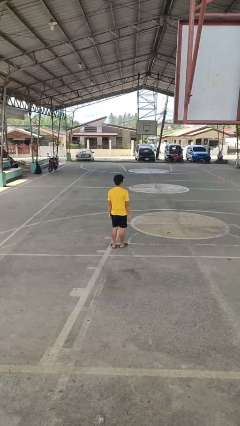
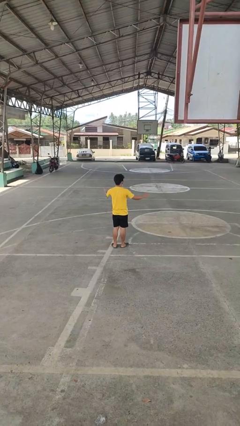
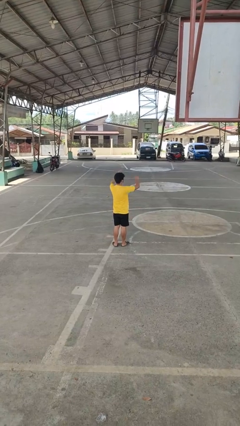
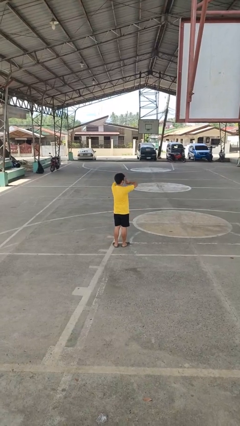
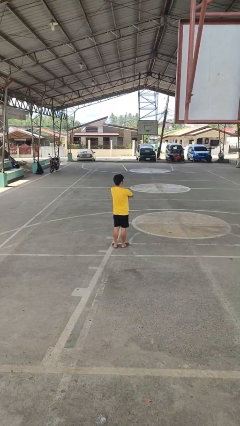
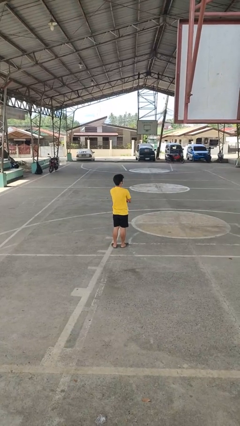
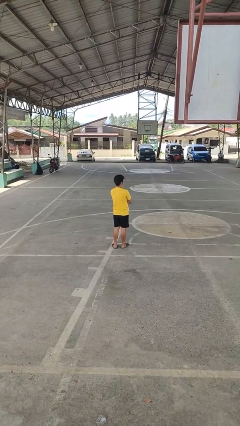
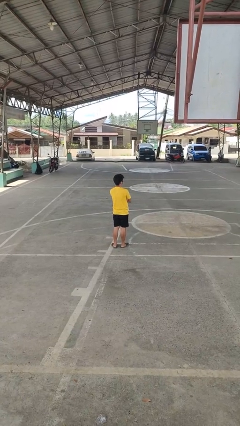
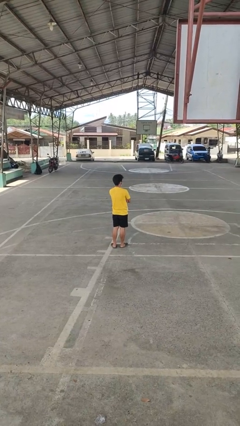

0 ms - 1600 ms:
person crosses arms

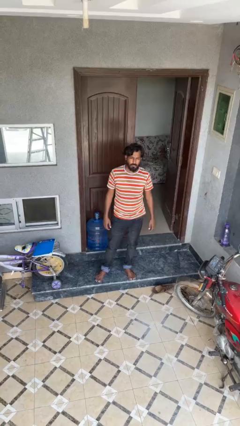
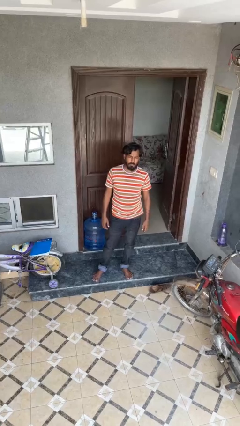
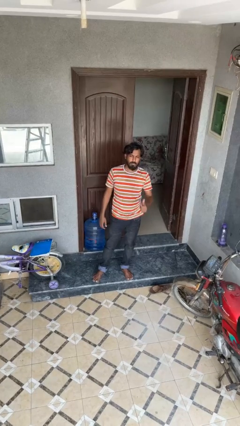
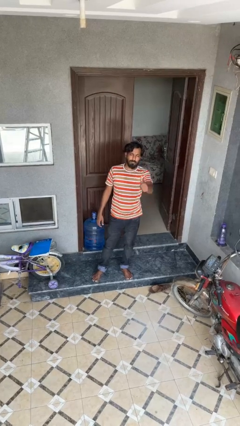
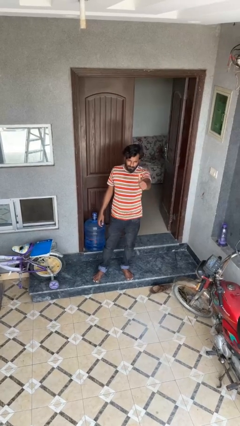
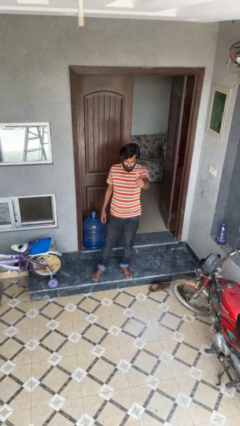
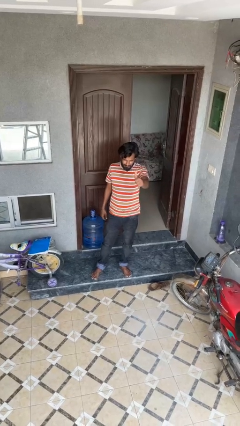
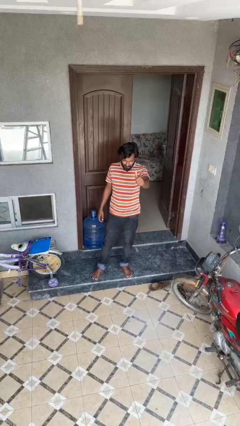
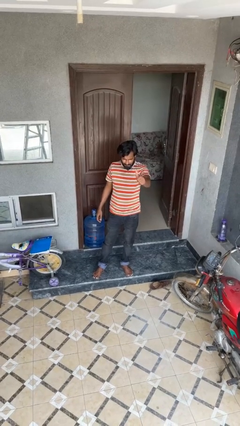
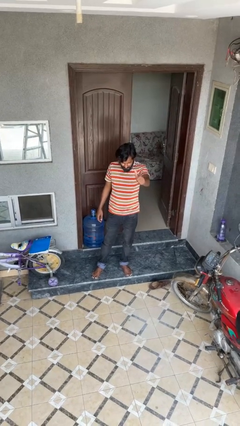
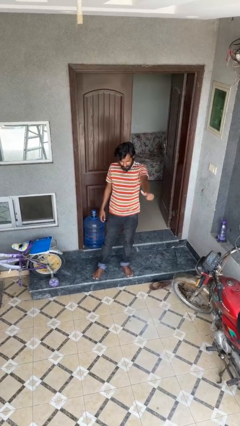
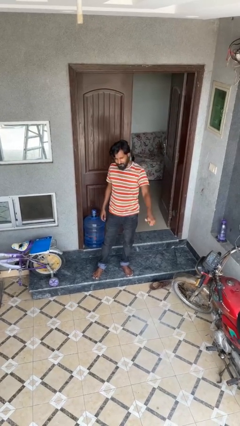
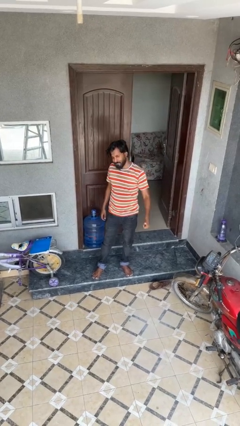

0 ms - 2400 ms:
person gestures thumbs up

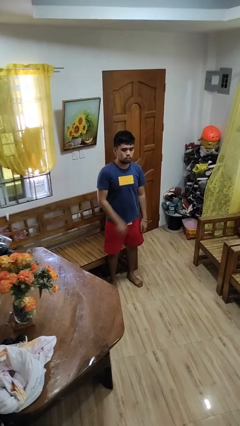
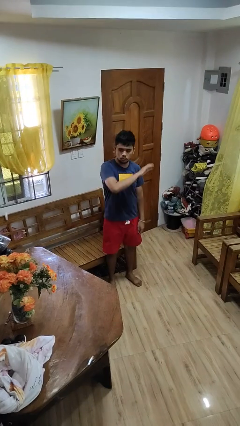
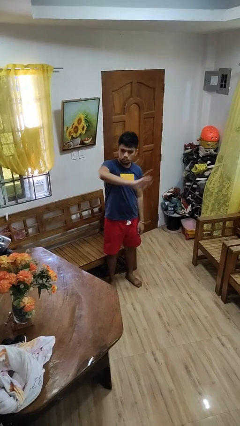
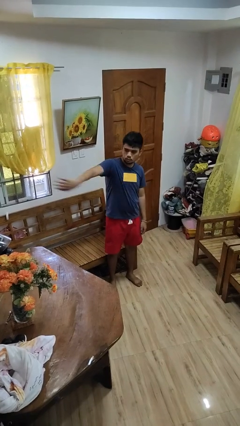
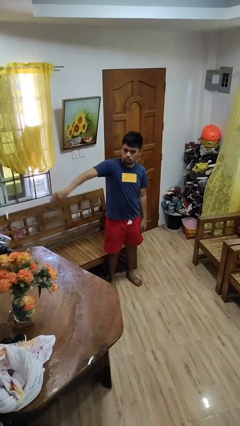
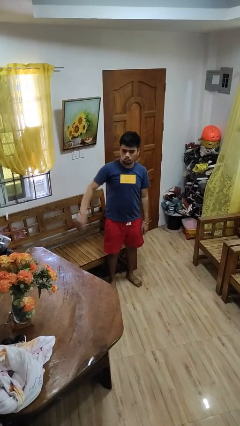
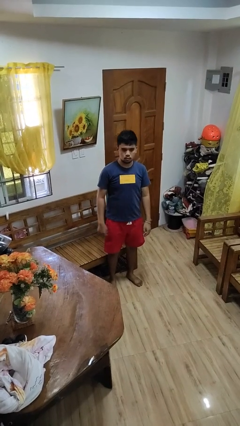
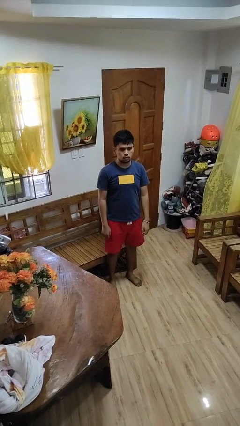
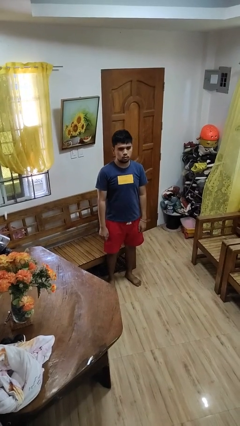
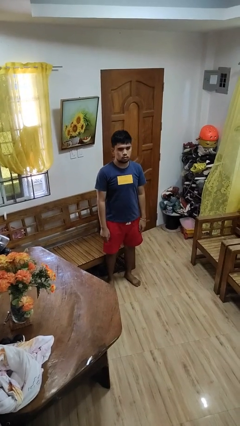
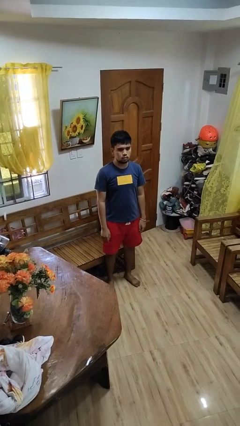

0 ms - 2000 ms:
person gestures swipe right

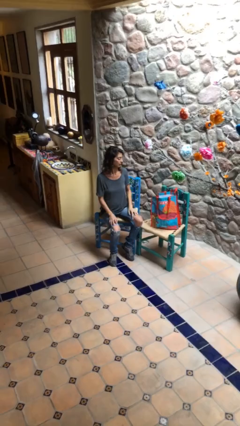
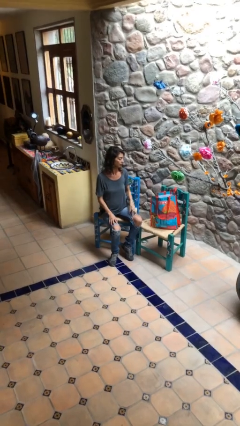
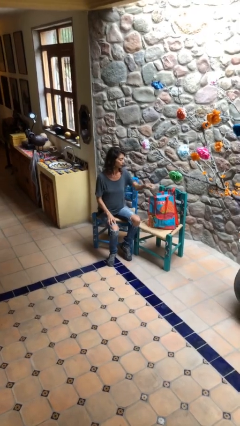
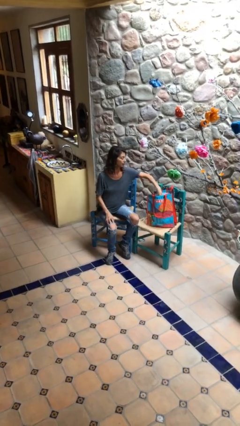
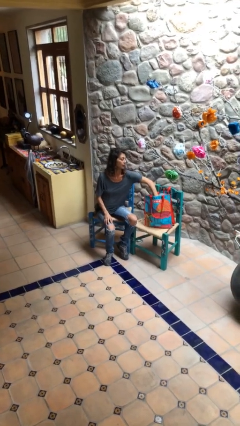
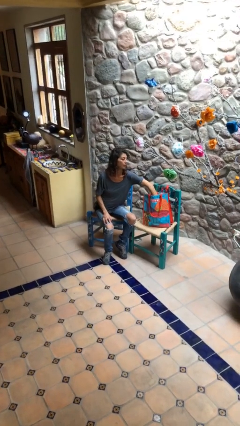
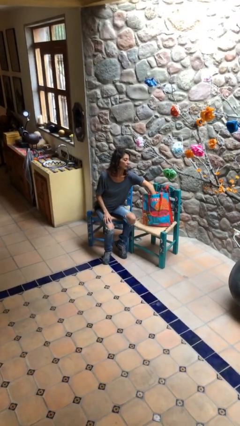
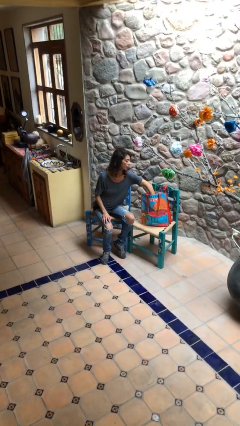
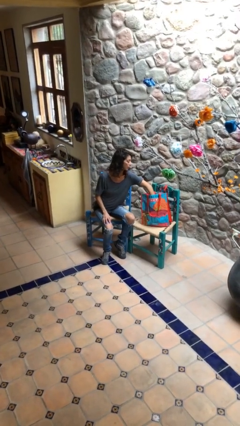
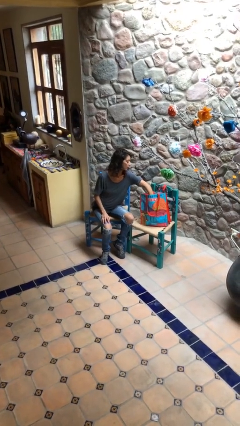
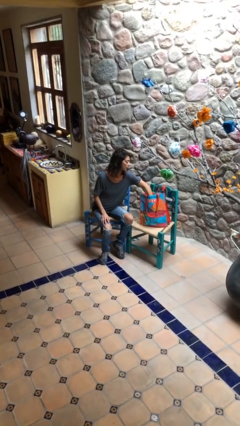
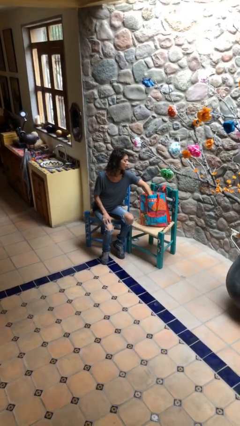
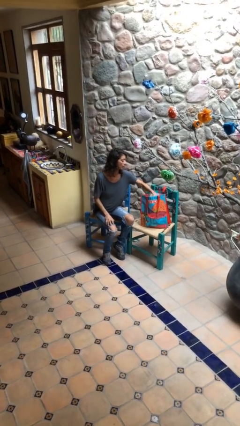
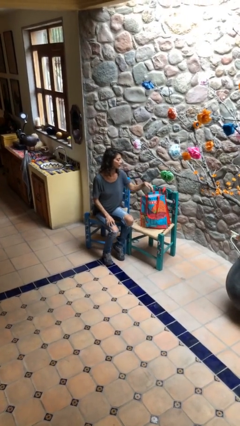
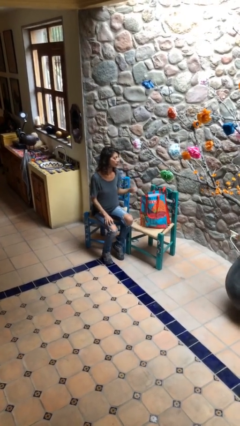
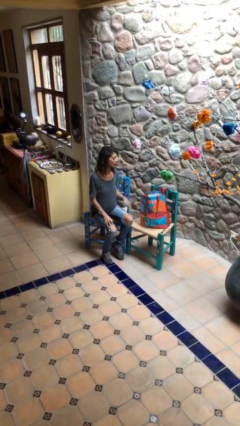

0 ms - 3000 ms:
person searches in bag

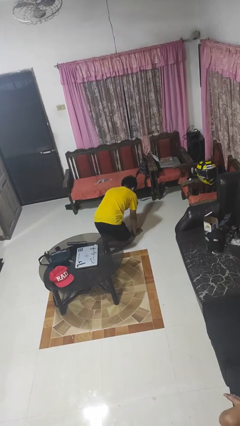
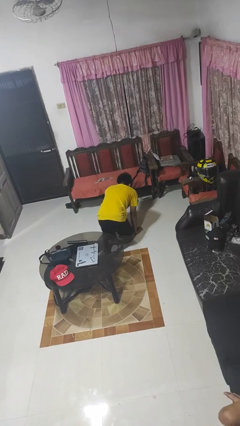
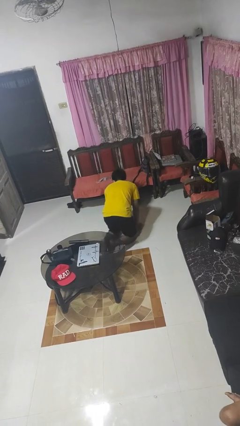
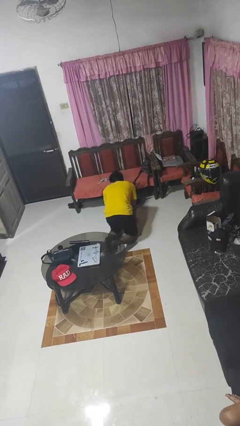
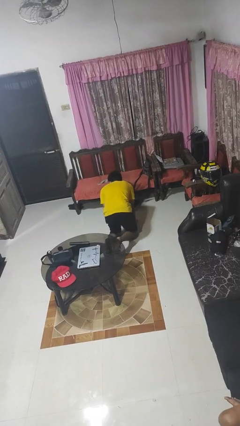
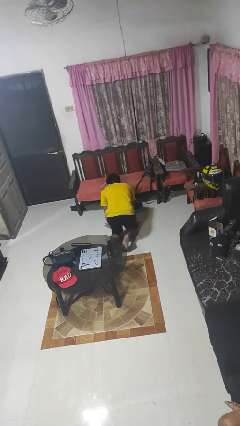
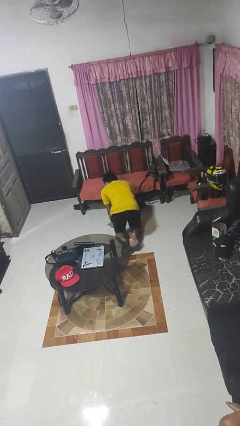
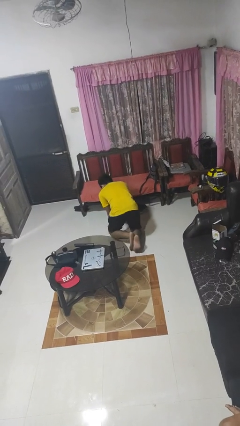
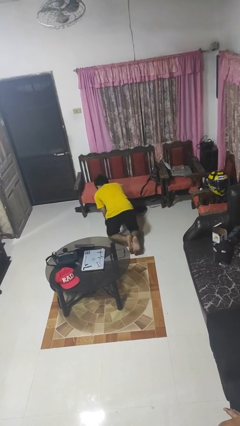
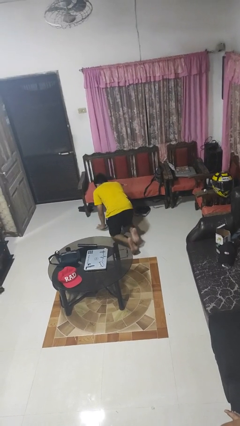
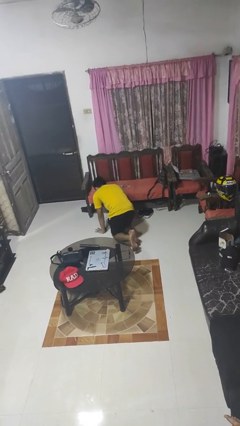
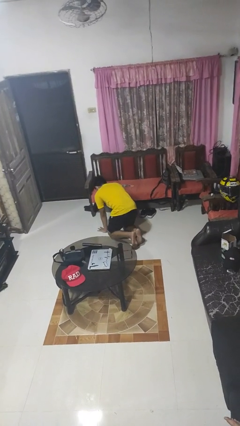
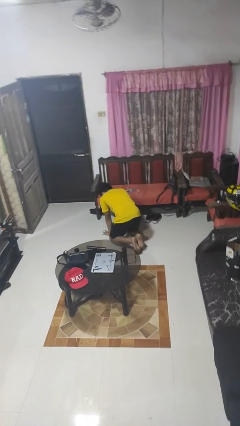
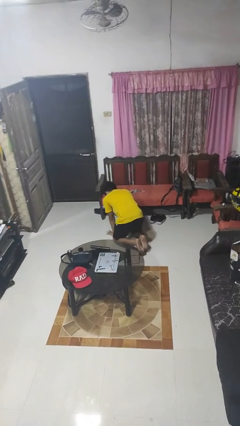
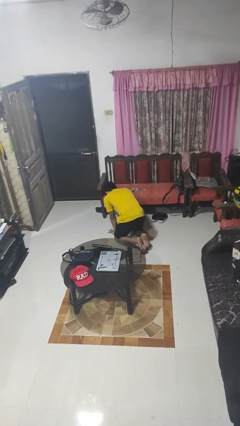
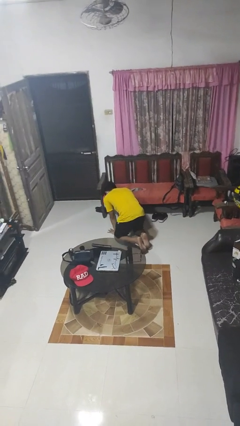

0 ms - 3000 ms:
person crawls

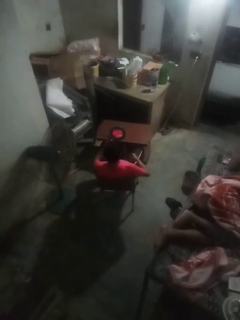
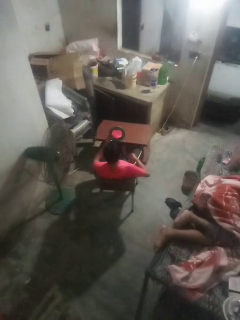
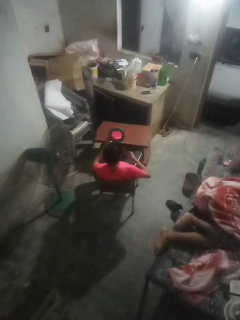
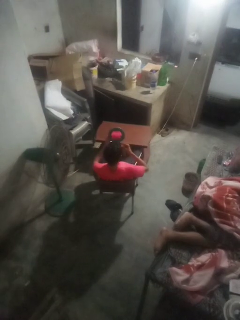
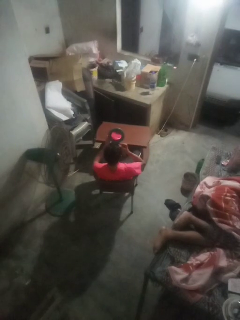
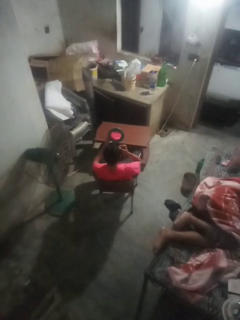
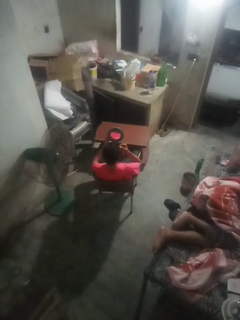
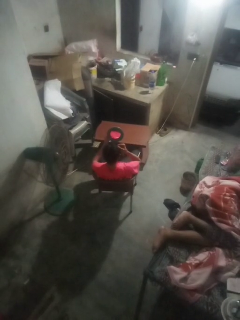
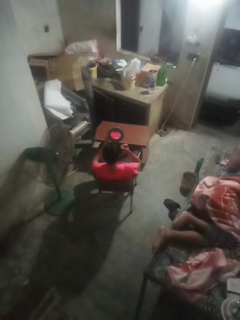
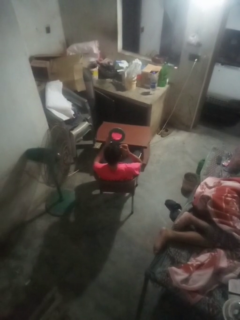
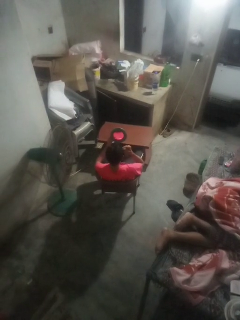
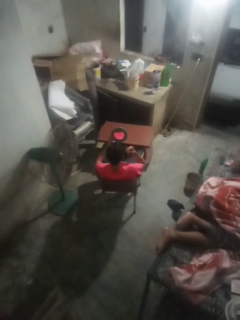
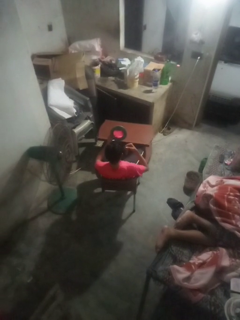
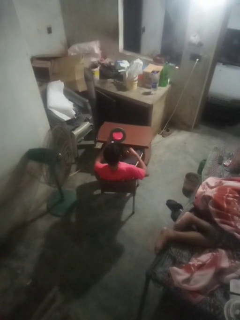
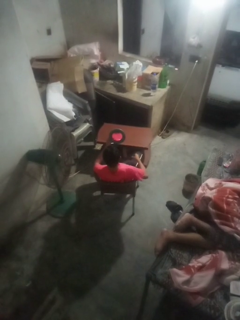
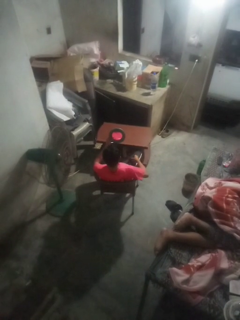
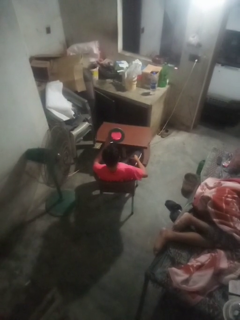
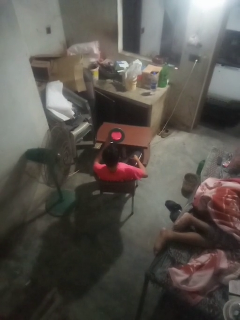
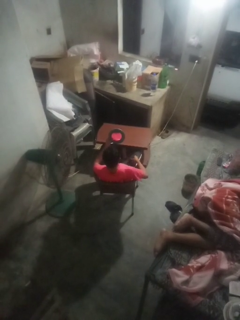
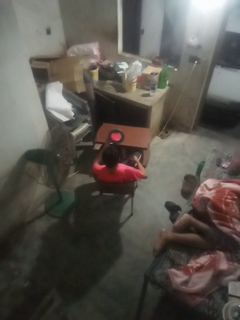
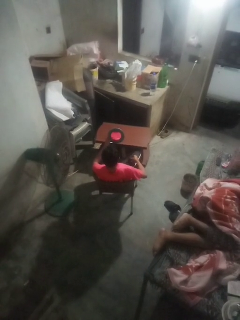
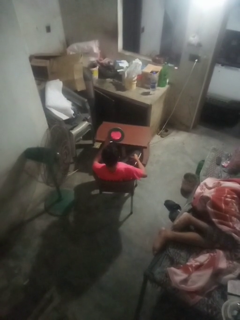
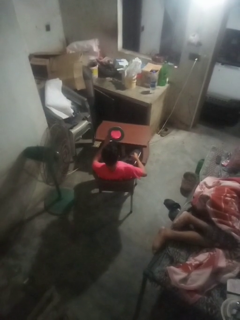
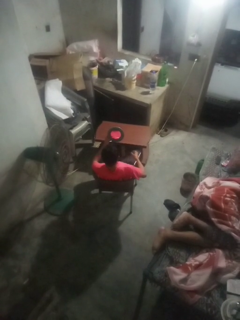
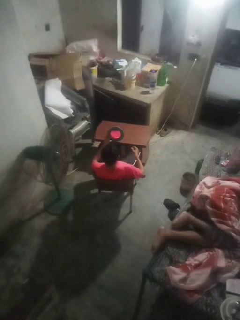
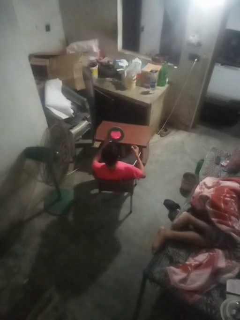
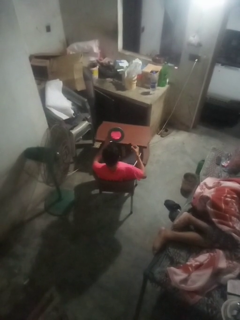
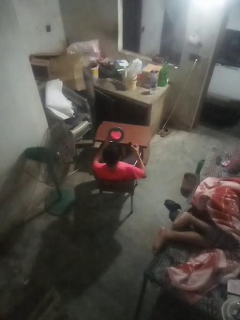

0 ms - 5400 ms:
person applies eye makeup

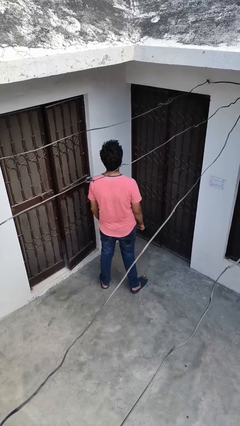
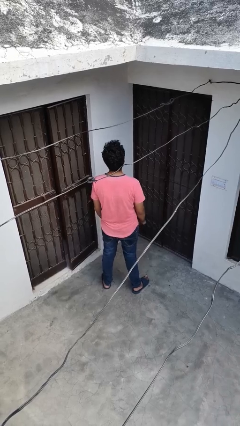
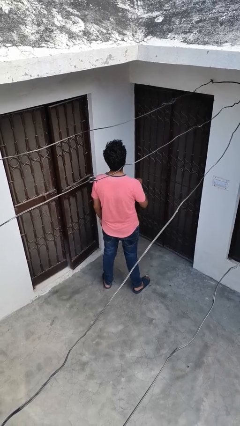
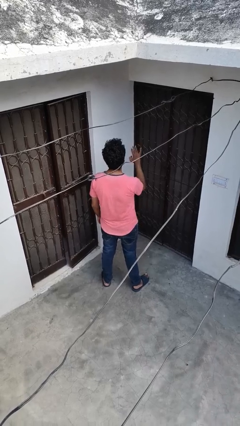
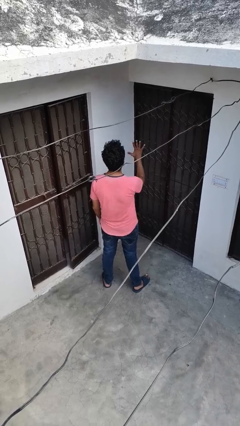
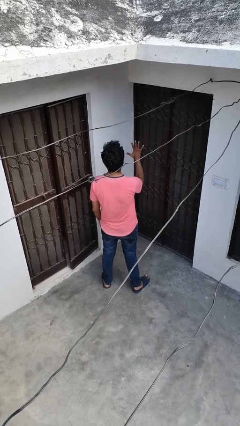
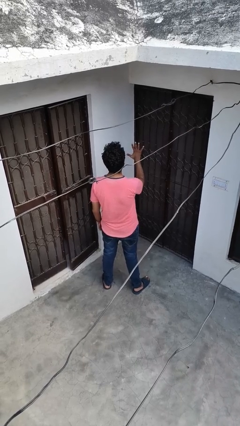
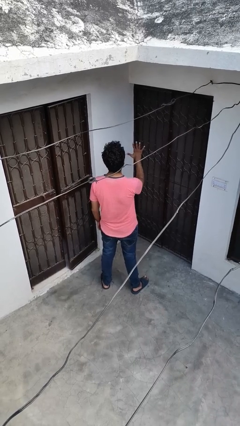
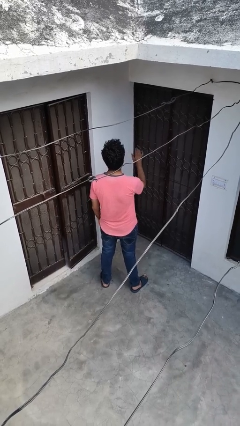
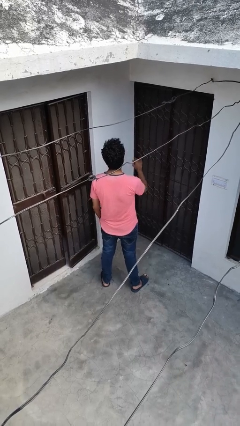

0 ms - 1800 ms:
person gestures number five
